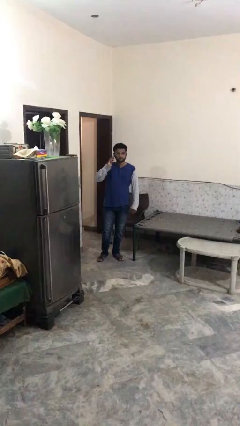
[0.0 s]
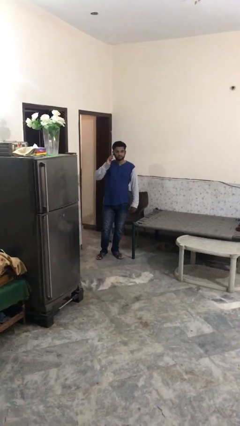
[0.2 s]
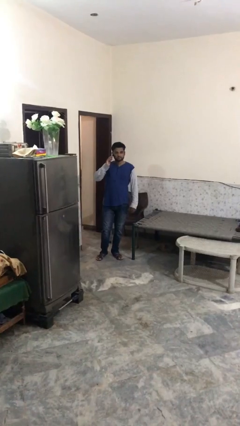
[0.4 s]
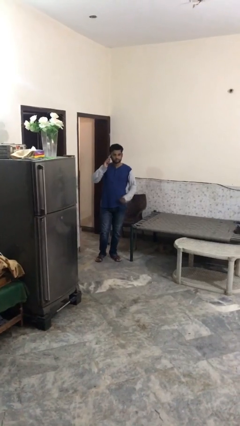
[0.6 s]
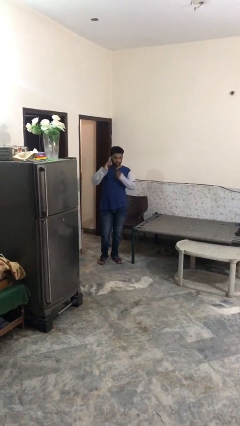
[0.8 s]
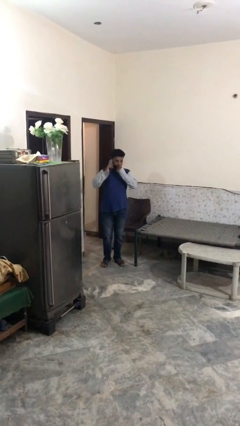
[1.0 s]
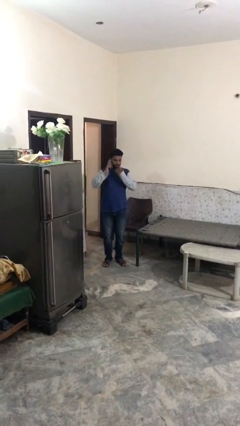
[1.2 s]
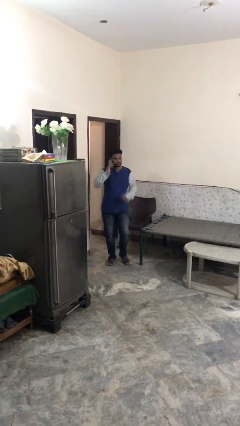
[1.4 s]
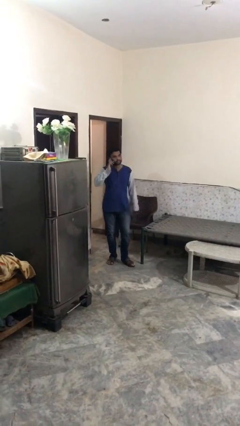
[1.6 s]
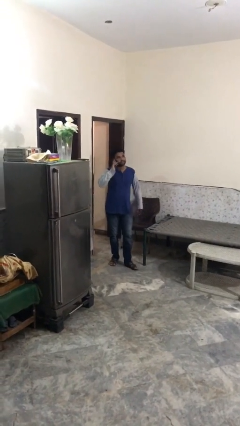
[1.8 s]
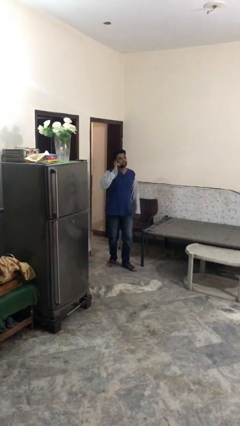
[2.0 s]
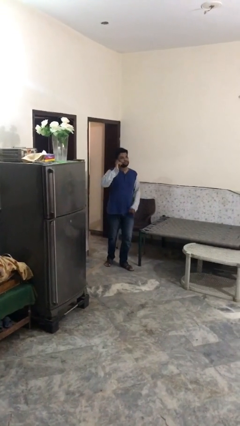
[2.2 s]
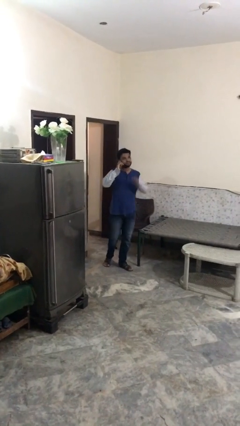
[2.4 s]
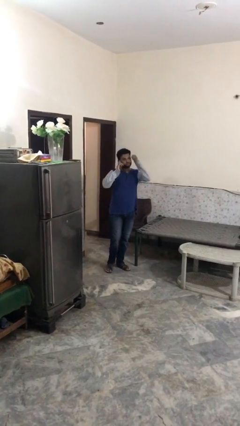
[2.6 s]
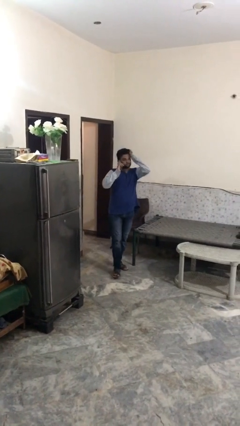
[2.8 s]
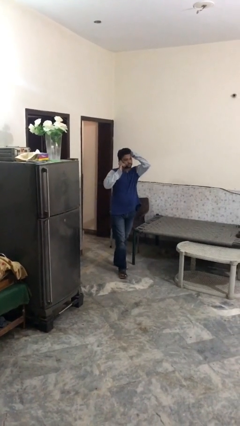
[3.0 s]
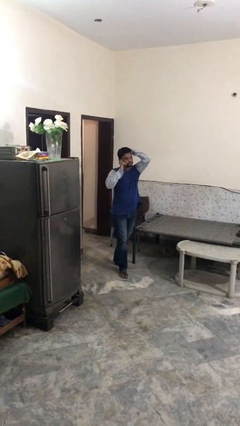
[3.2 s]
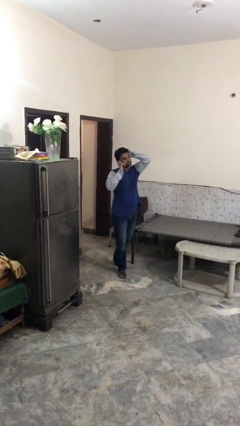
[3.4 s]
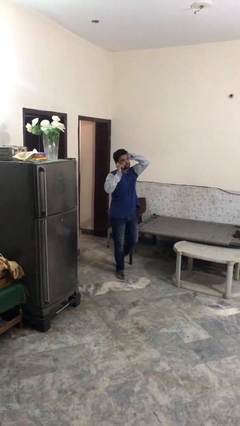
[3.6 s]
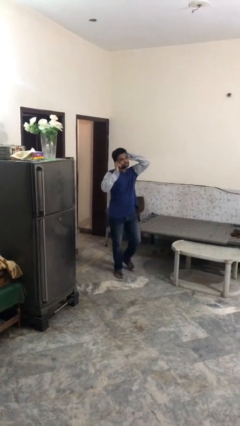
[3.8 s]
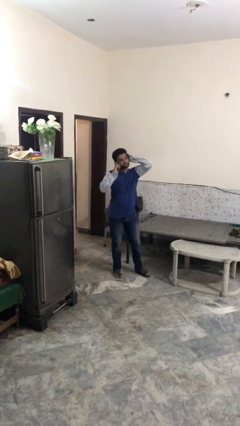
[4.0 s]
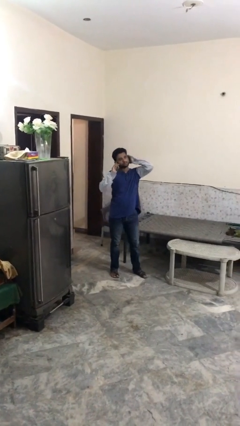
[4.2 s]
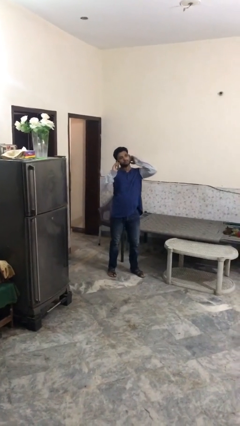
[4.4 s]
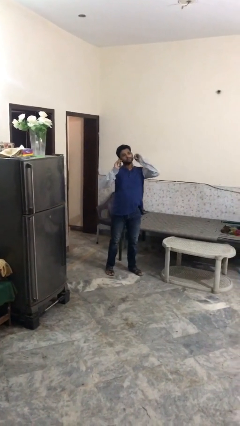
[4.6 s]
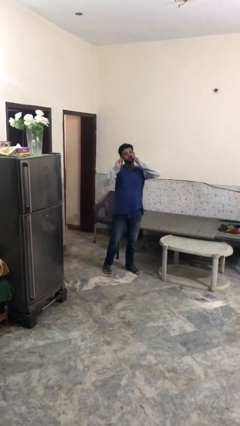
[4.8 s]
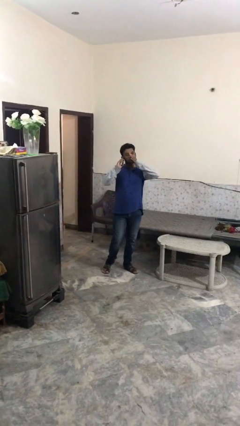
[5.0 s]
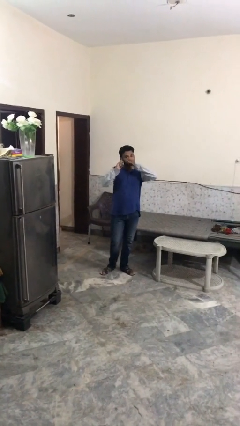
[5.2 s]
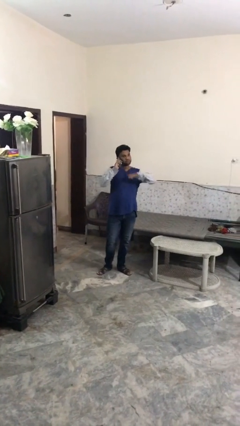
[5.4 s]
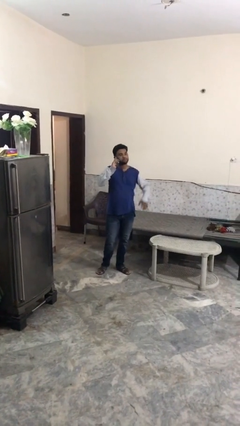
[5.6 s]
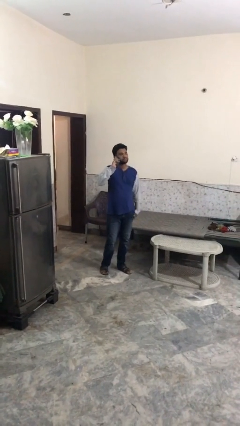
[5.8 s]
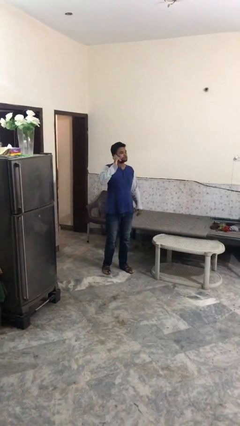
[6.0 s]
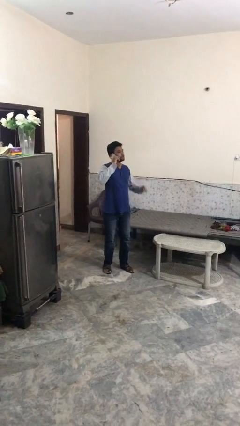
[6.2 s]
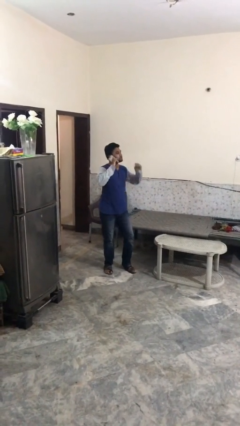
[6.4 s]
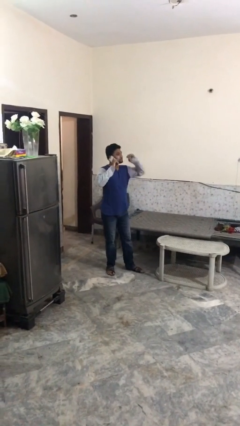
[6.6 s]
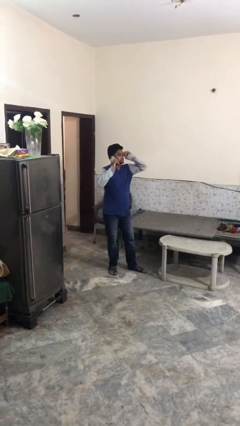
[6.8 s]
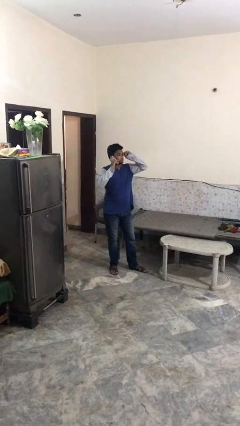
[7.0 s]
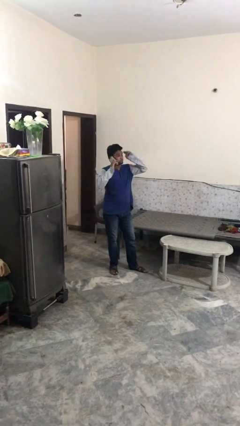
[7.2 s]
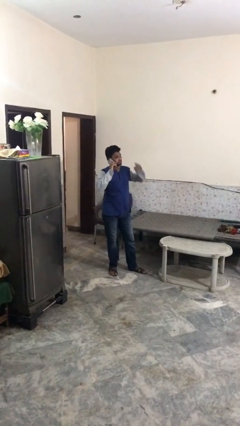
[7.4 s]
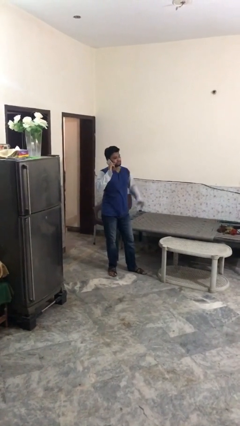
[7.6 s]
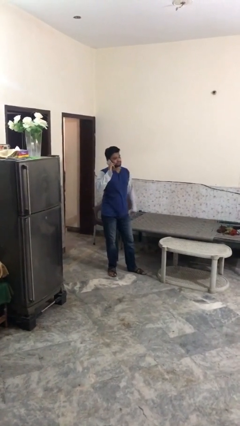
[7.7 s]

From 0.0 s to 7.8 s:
person talks on phone

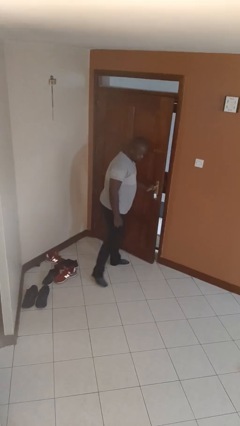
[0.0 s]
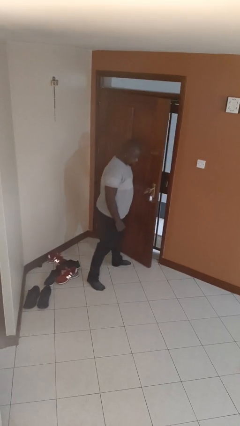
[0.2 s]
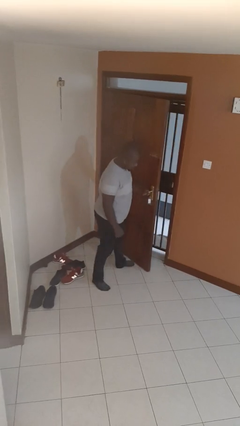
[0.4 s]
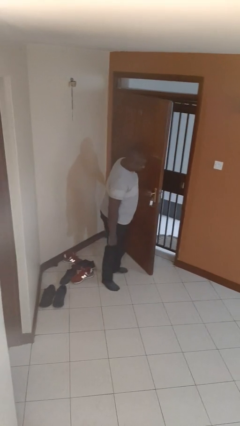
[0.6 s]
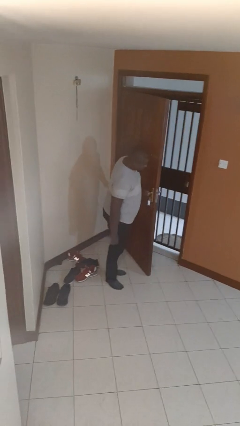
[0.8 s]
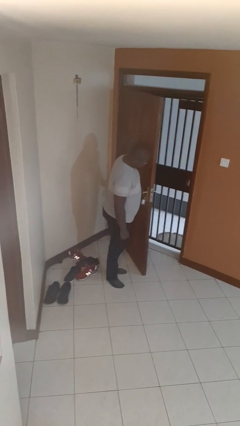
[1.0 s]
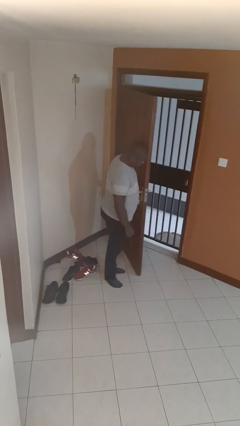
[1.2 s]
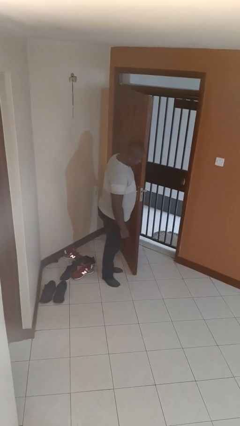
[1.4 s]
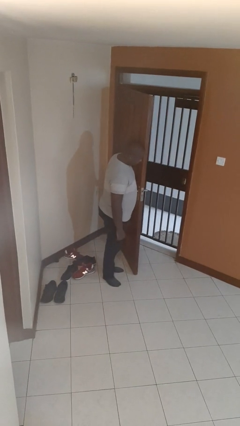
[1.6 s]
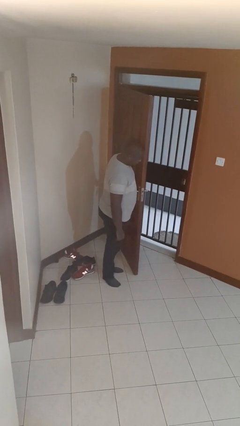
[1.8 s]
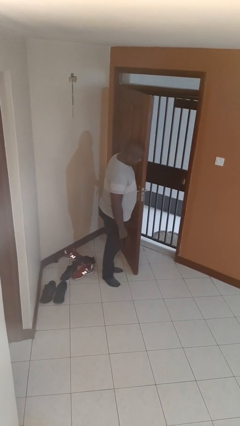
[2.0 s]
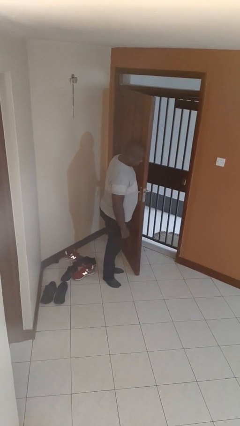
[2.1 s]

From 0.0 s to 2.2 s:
person opens facility door

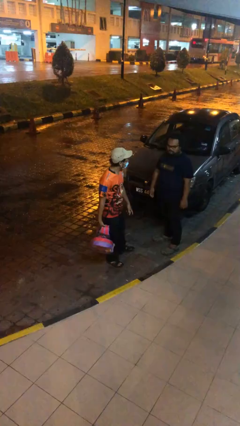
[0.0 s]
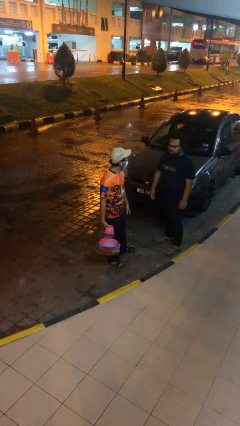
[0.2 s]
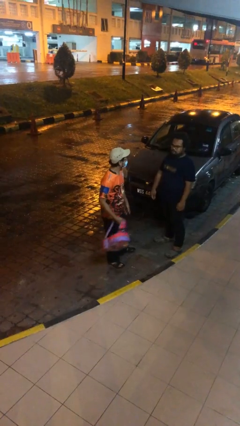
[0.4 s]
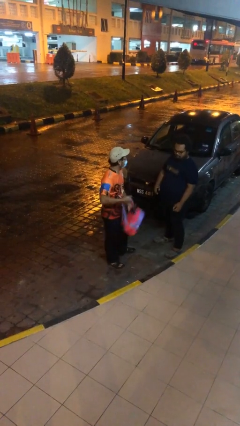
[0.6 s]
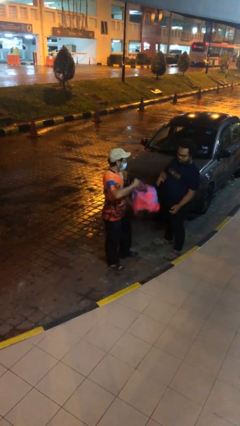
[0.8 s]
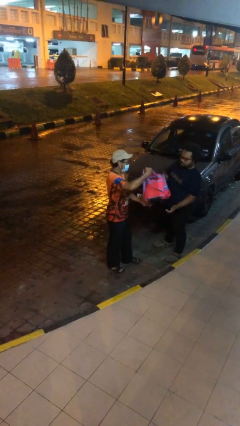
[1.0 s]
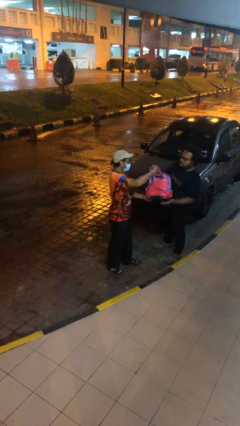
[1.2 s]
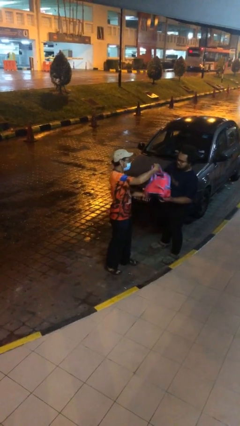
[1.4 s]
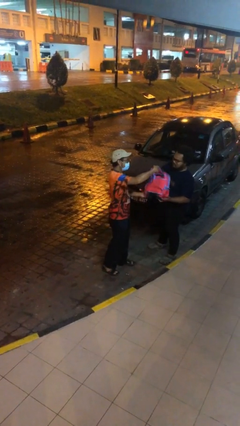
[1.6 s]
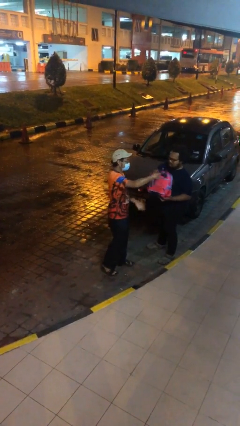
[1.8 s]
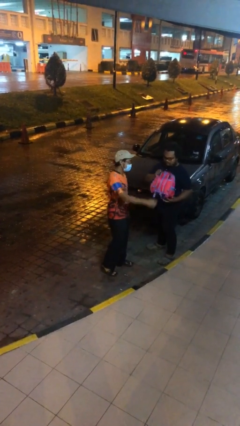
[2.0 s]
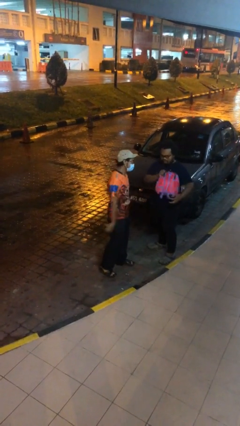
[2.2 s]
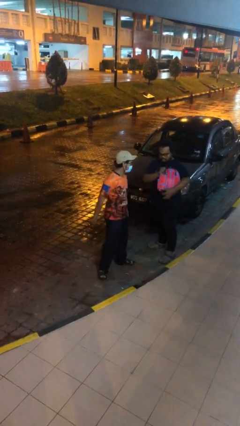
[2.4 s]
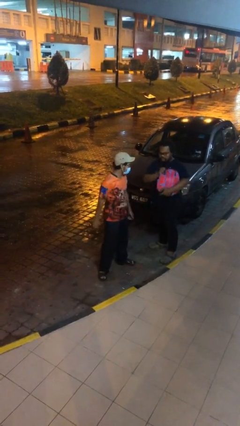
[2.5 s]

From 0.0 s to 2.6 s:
person transfers object to person

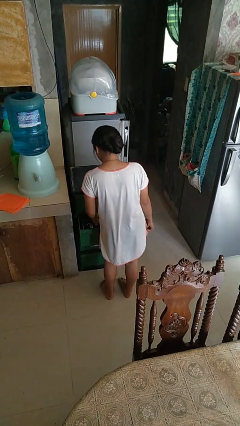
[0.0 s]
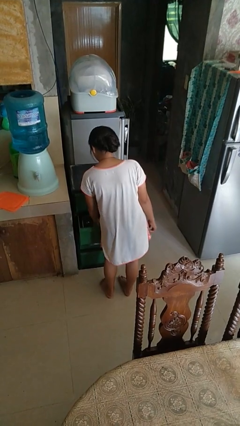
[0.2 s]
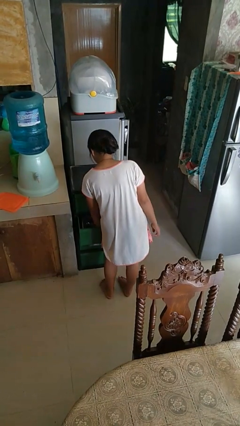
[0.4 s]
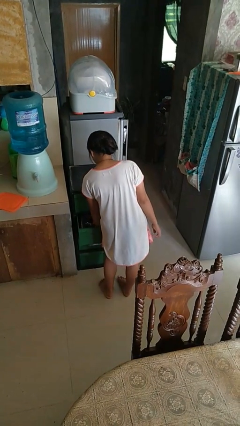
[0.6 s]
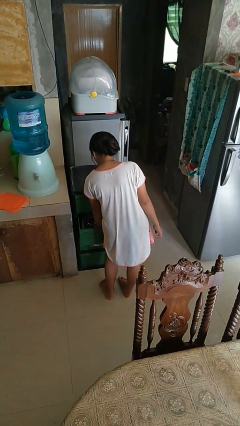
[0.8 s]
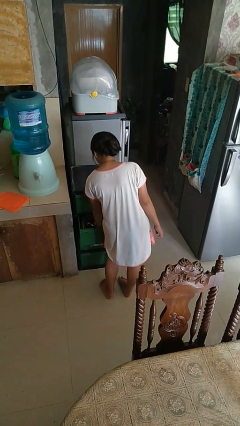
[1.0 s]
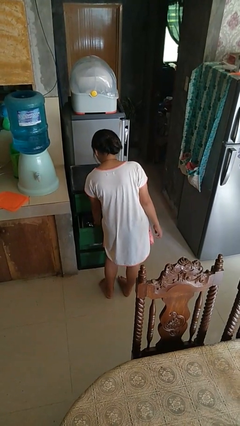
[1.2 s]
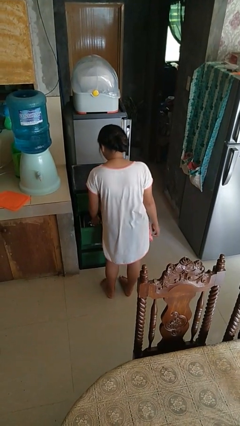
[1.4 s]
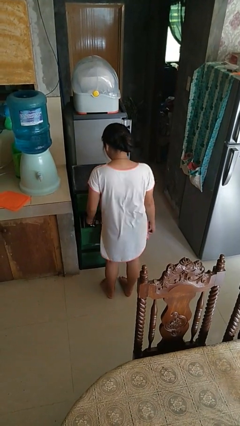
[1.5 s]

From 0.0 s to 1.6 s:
person puts object into kitchen drawer

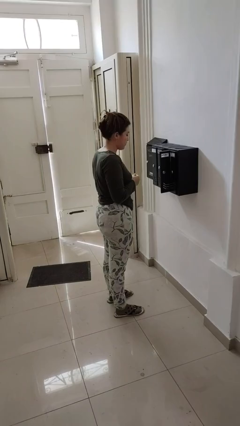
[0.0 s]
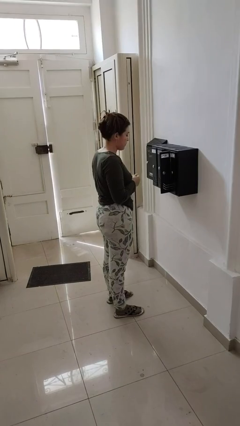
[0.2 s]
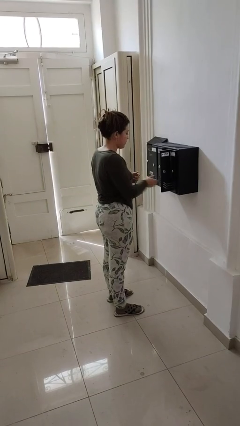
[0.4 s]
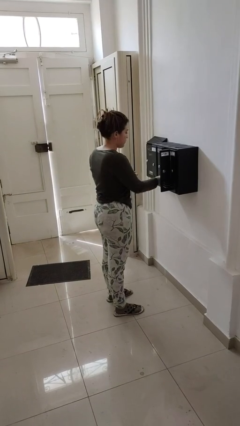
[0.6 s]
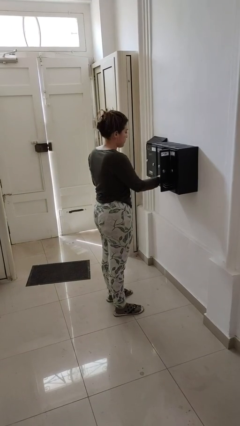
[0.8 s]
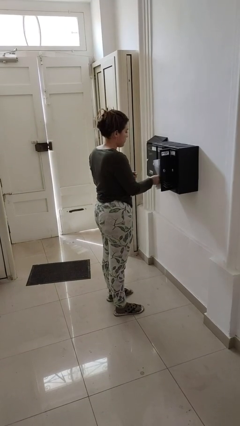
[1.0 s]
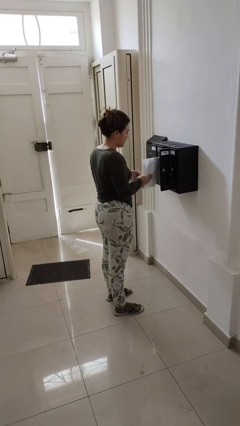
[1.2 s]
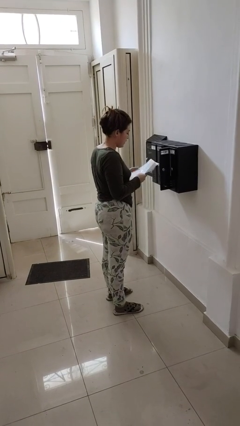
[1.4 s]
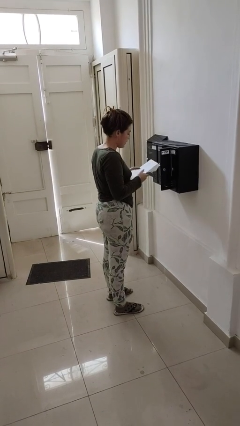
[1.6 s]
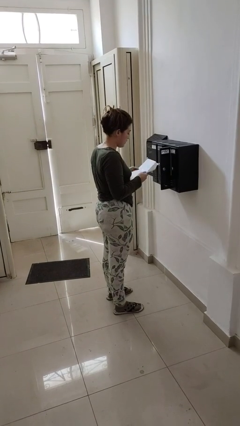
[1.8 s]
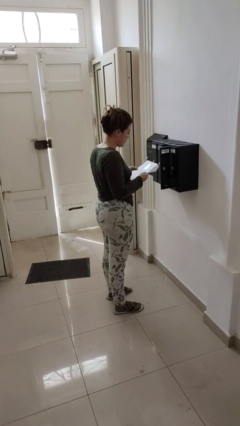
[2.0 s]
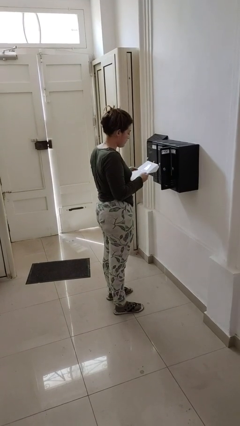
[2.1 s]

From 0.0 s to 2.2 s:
person takes letters from mailbox

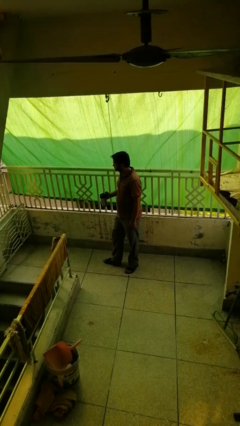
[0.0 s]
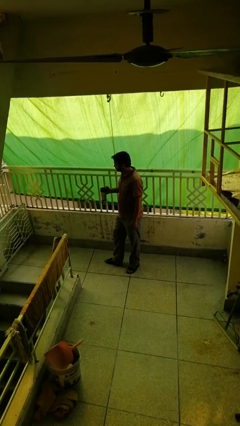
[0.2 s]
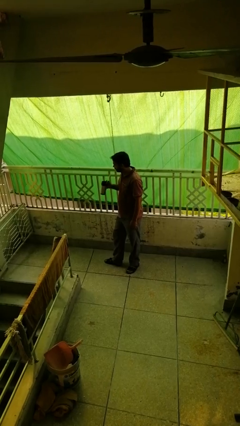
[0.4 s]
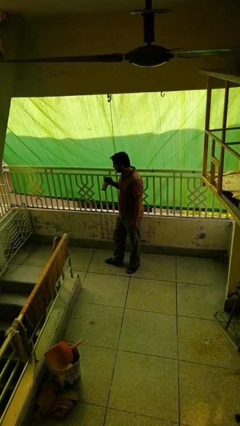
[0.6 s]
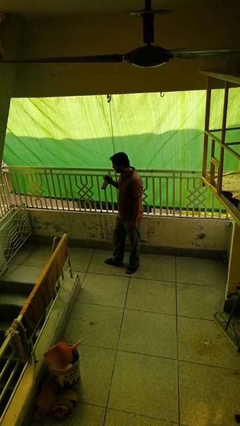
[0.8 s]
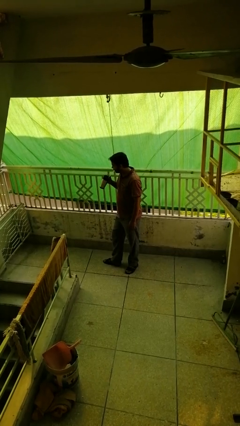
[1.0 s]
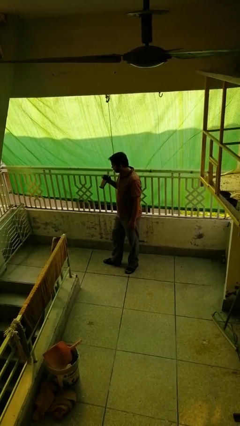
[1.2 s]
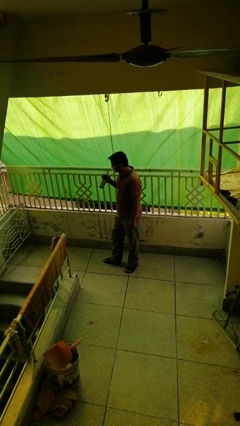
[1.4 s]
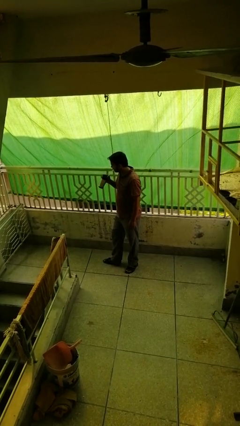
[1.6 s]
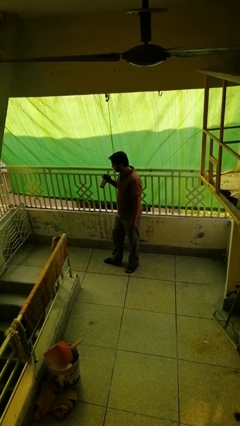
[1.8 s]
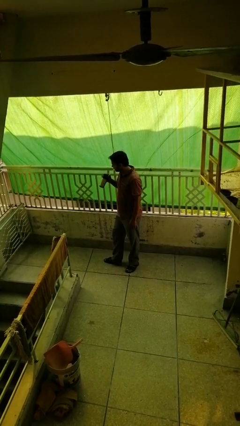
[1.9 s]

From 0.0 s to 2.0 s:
person drinks from straw
